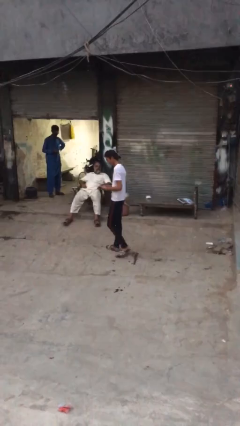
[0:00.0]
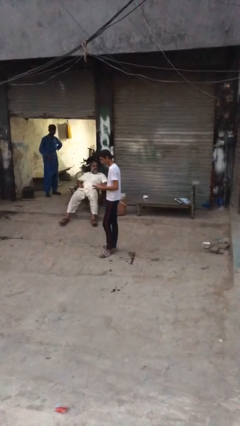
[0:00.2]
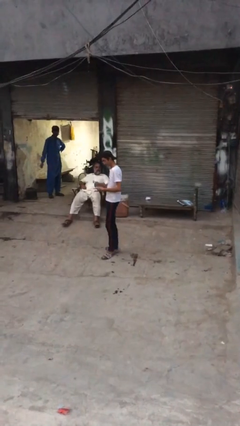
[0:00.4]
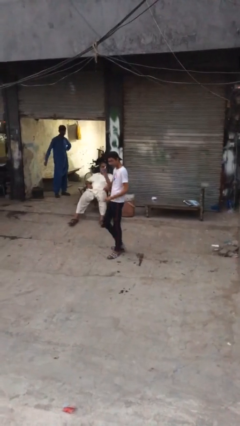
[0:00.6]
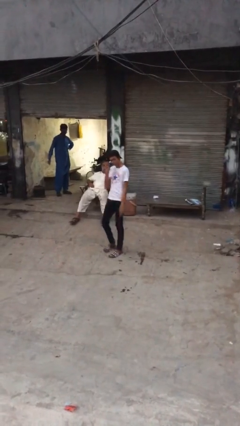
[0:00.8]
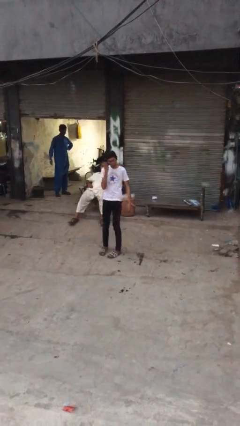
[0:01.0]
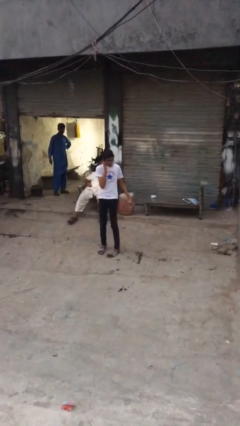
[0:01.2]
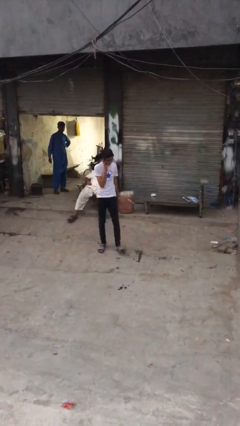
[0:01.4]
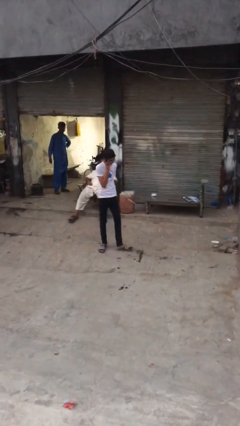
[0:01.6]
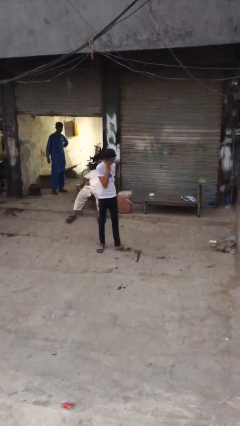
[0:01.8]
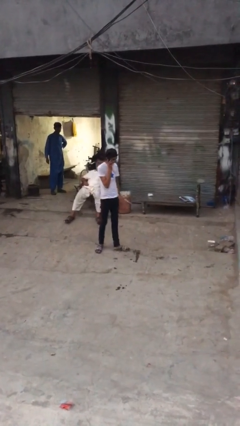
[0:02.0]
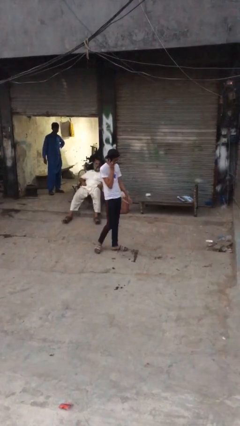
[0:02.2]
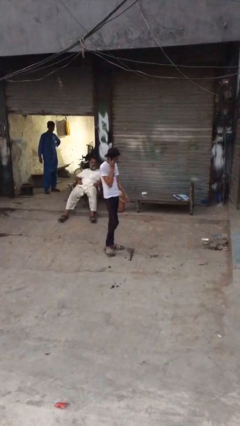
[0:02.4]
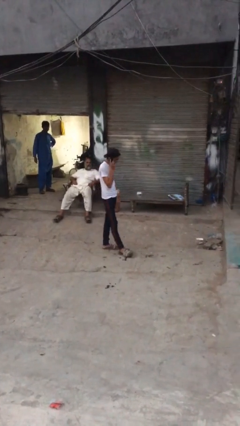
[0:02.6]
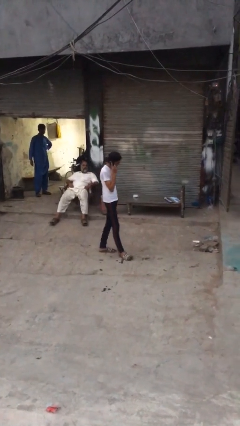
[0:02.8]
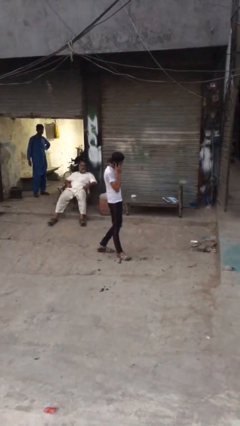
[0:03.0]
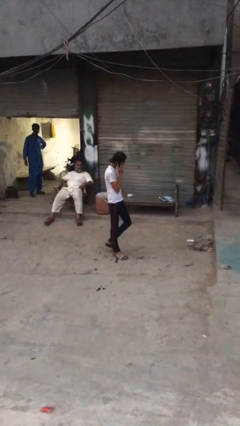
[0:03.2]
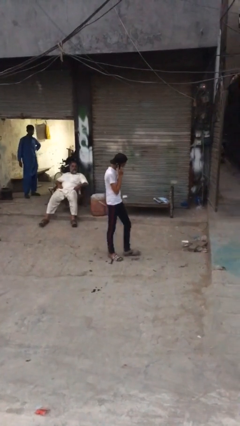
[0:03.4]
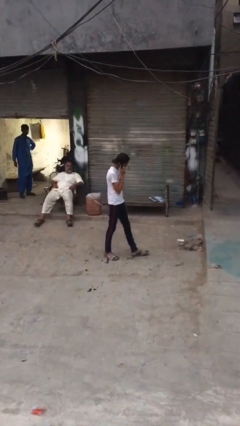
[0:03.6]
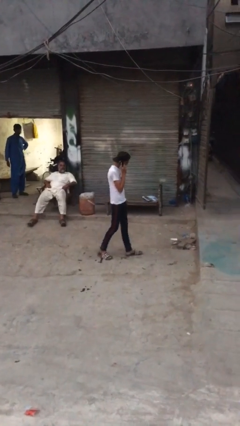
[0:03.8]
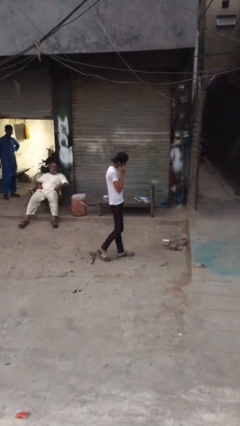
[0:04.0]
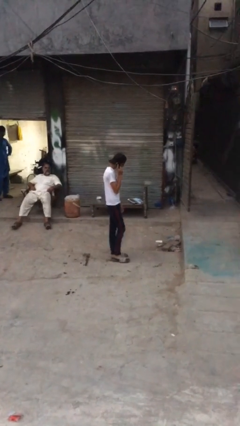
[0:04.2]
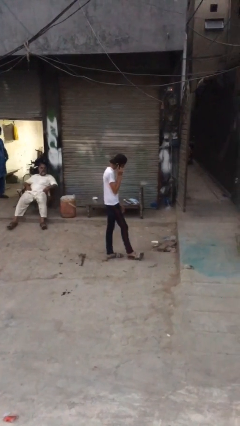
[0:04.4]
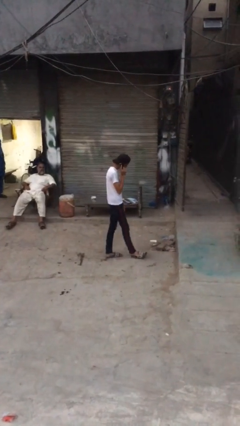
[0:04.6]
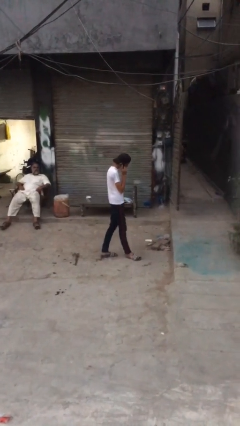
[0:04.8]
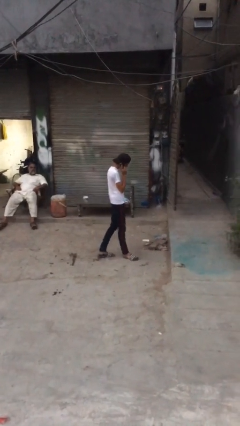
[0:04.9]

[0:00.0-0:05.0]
person talks on phone

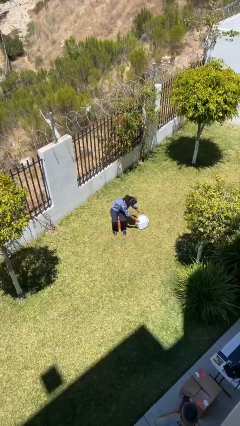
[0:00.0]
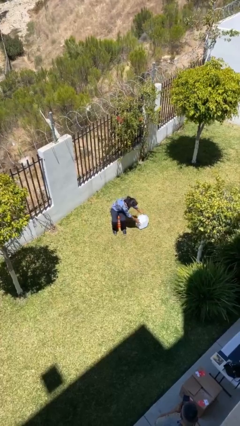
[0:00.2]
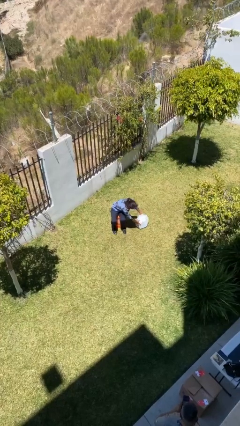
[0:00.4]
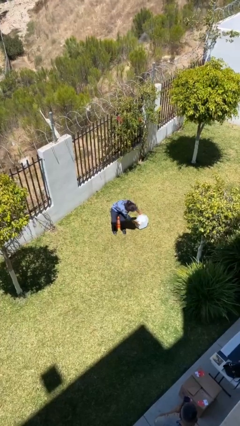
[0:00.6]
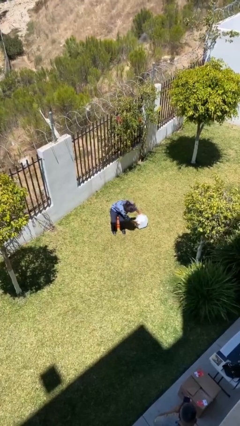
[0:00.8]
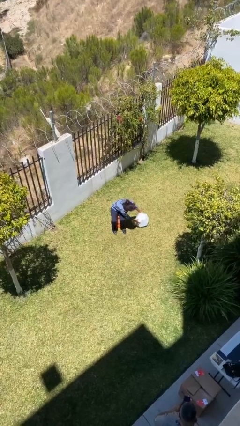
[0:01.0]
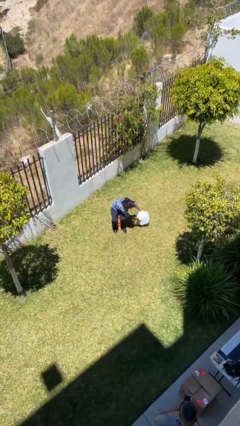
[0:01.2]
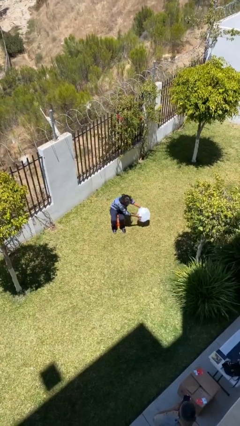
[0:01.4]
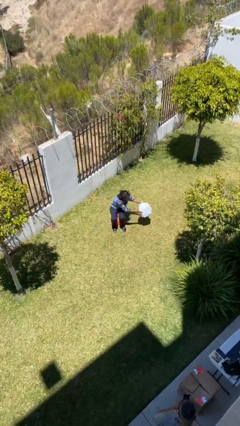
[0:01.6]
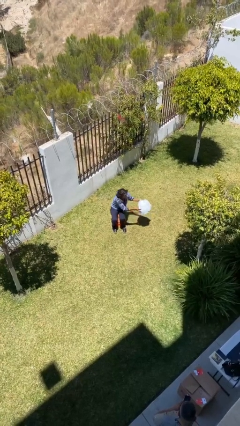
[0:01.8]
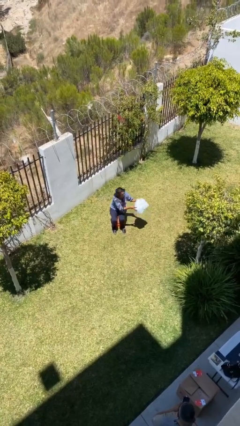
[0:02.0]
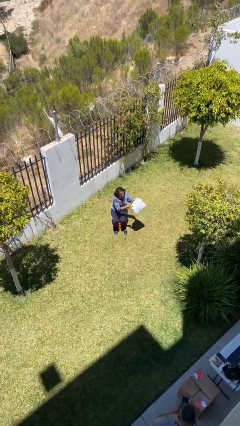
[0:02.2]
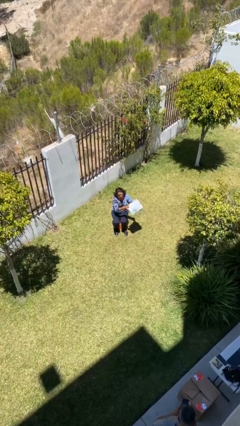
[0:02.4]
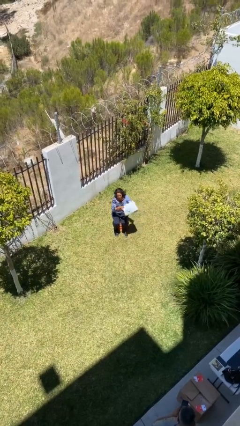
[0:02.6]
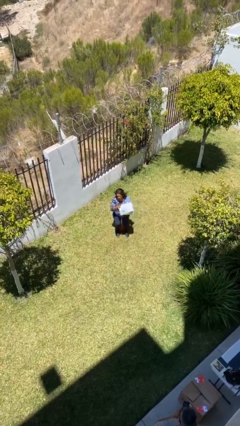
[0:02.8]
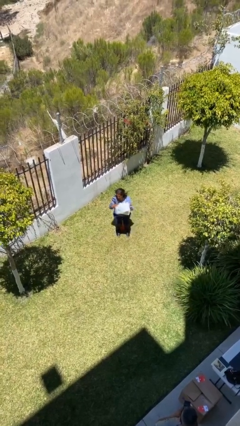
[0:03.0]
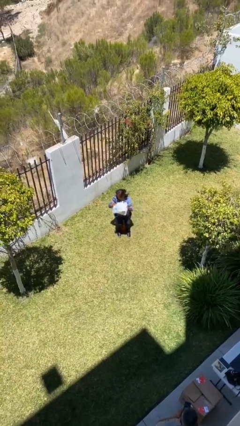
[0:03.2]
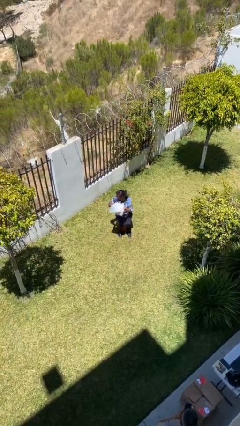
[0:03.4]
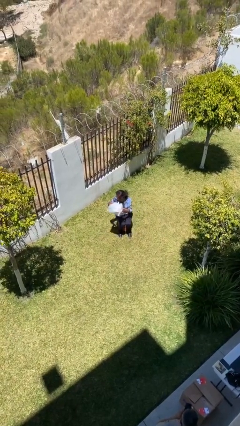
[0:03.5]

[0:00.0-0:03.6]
person picks up object from floor

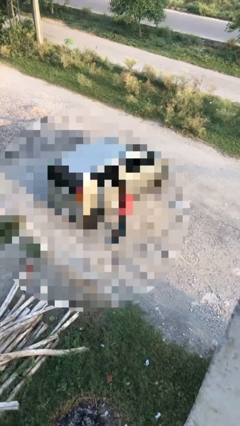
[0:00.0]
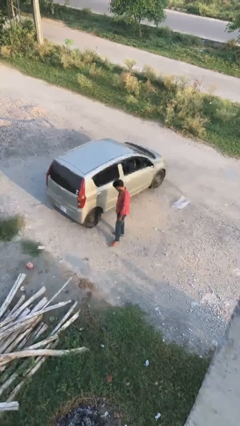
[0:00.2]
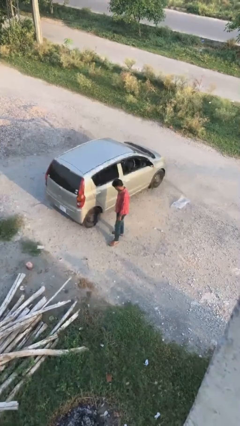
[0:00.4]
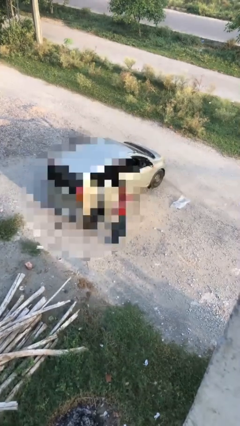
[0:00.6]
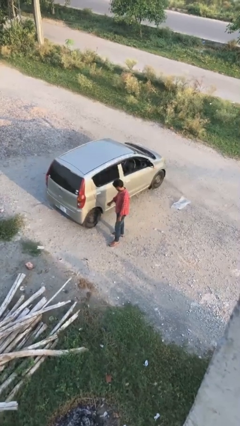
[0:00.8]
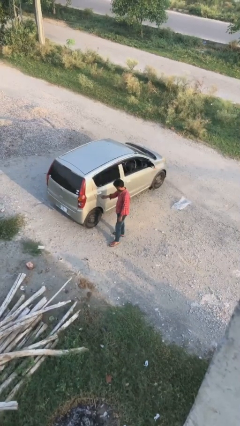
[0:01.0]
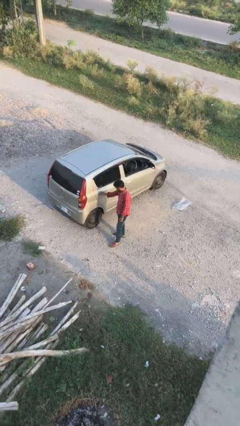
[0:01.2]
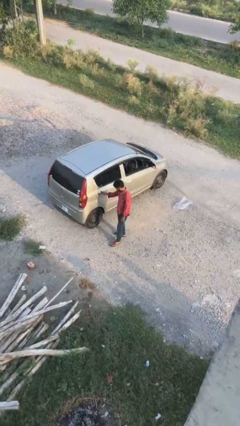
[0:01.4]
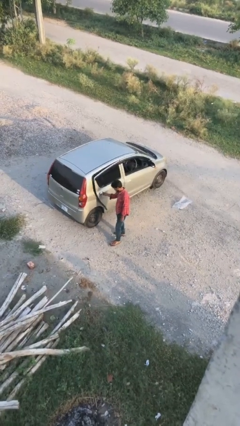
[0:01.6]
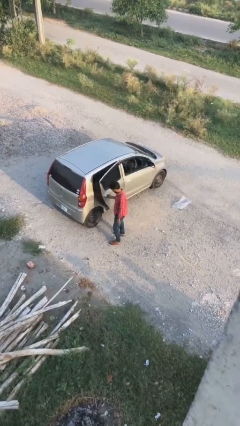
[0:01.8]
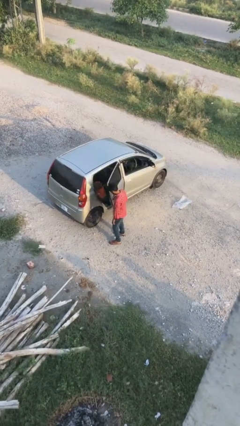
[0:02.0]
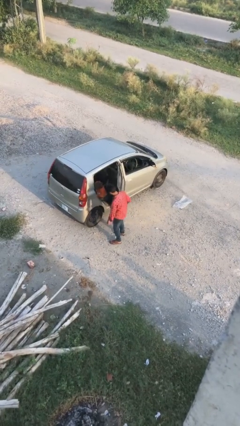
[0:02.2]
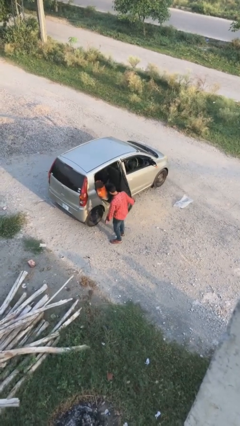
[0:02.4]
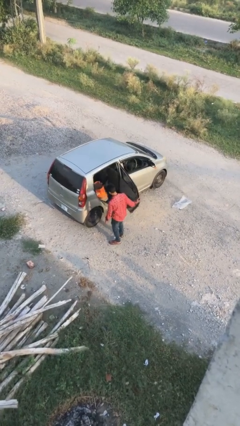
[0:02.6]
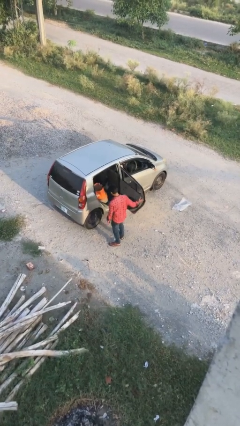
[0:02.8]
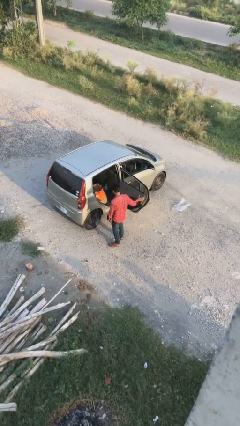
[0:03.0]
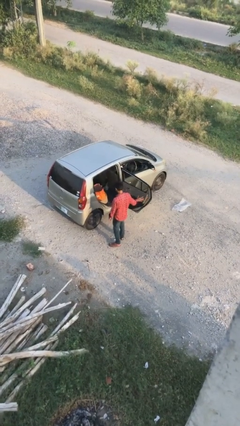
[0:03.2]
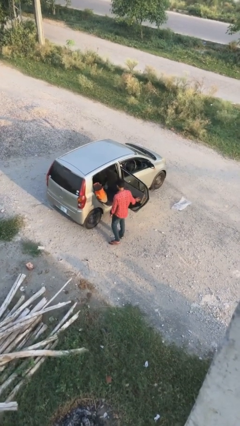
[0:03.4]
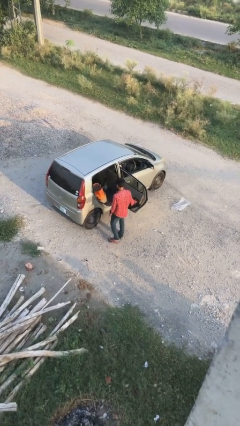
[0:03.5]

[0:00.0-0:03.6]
person opens car door

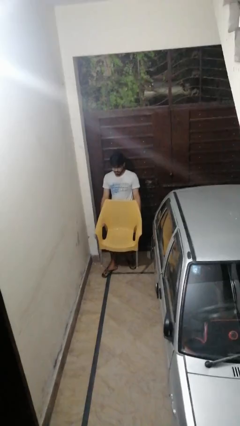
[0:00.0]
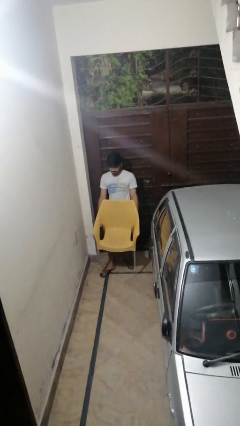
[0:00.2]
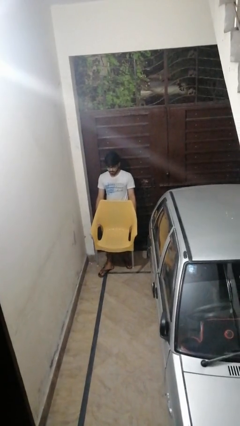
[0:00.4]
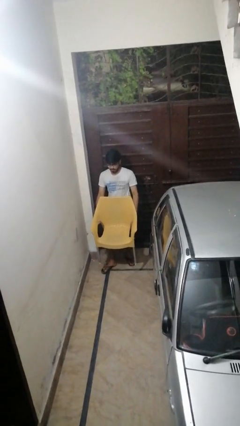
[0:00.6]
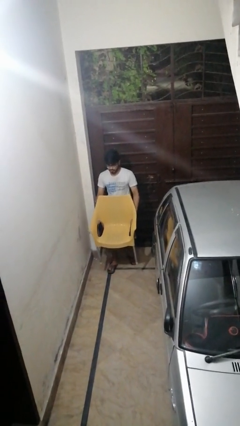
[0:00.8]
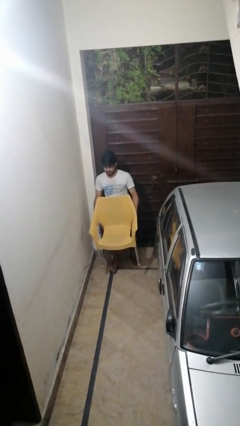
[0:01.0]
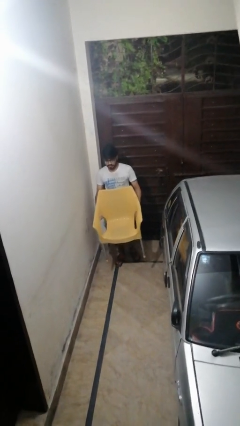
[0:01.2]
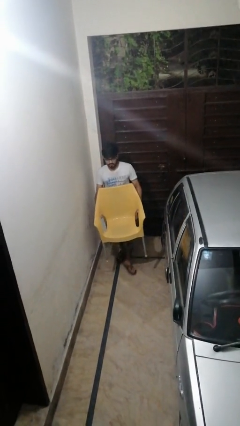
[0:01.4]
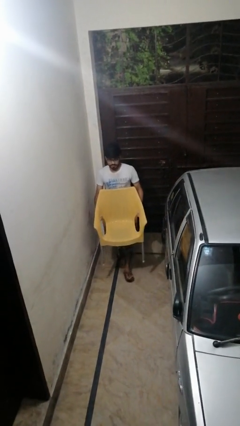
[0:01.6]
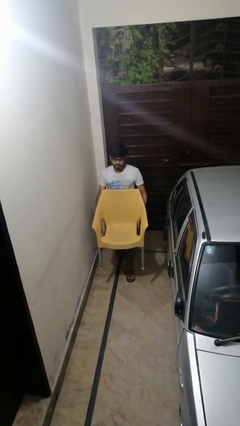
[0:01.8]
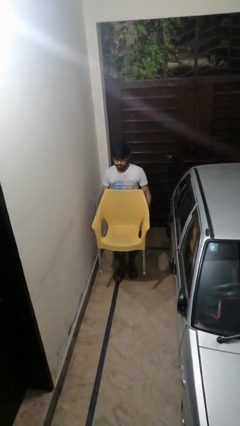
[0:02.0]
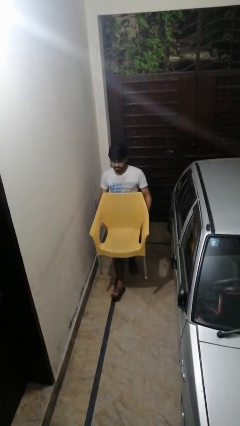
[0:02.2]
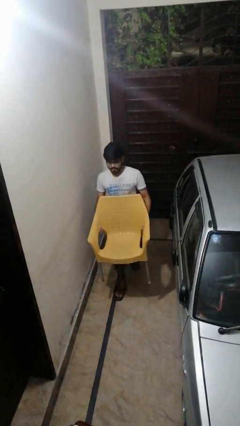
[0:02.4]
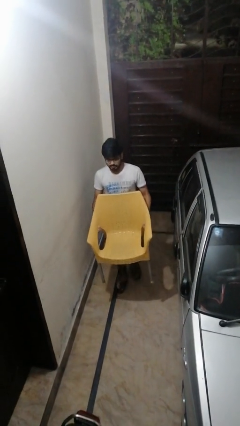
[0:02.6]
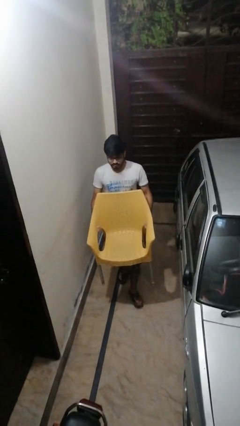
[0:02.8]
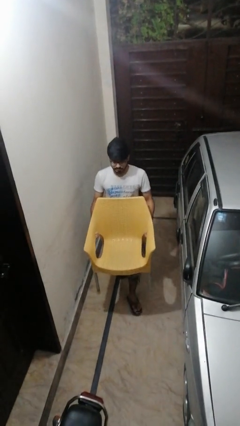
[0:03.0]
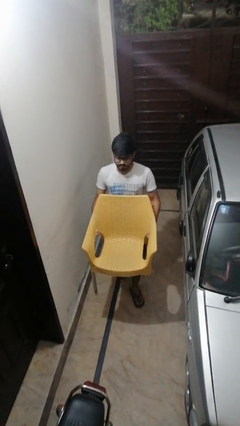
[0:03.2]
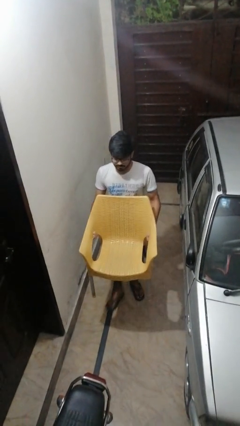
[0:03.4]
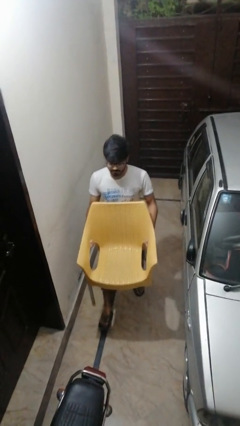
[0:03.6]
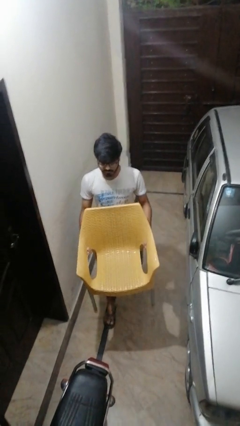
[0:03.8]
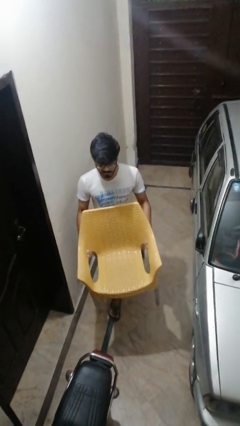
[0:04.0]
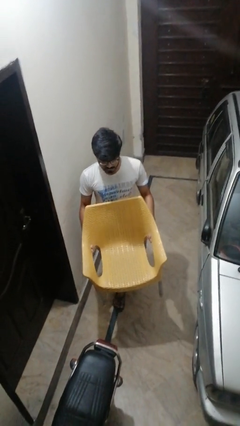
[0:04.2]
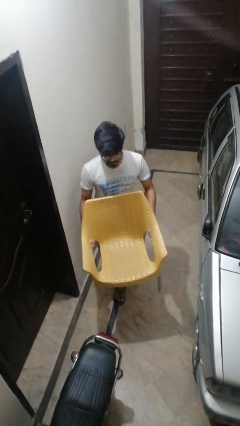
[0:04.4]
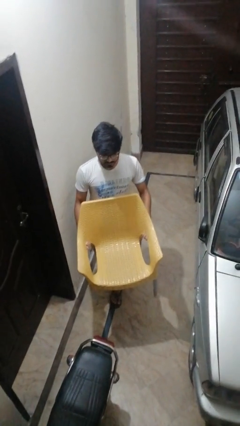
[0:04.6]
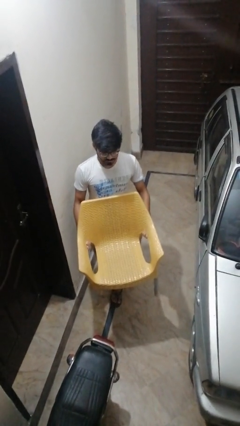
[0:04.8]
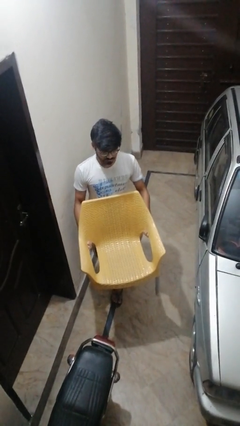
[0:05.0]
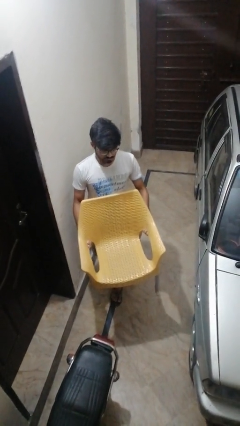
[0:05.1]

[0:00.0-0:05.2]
person carries furniture

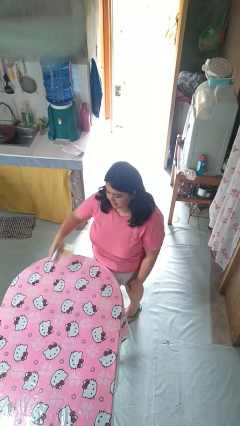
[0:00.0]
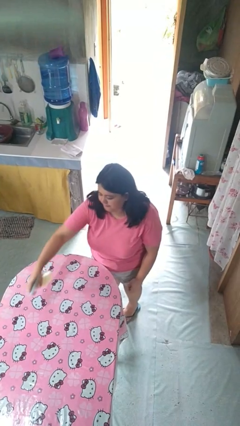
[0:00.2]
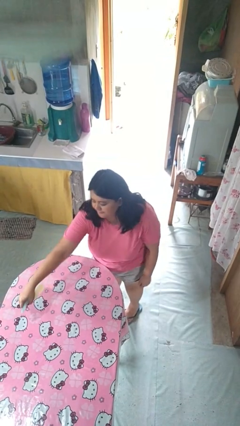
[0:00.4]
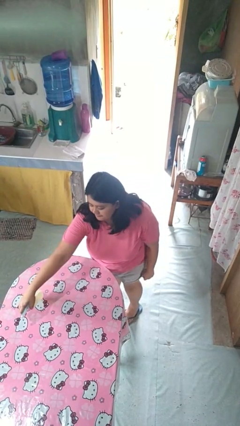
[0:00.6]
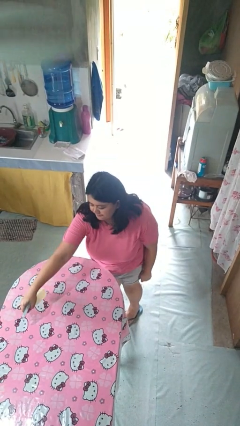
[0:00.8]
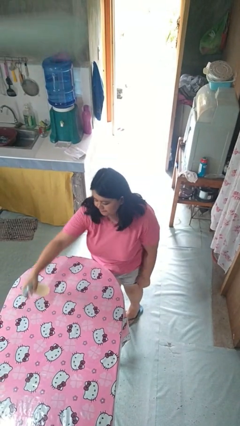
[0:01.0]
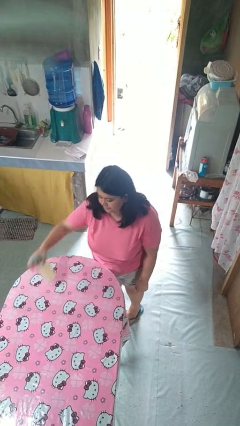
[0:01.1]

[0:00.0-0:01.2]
person sprays from bottle
